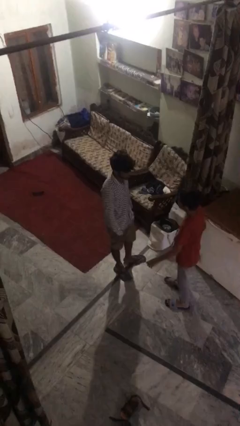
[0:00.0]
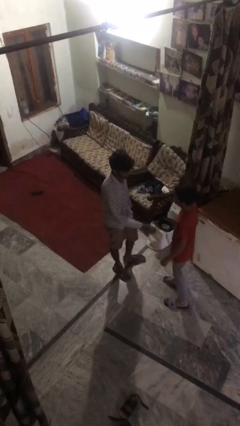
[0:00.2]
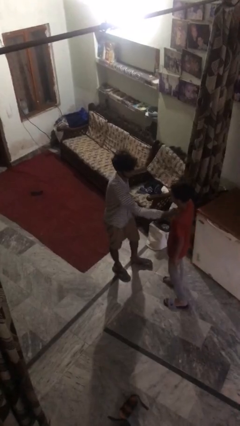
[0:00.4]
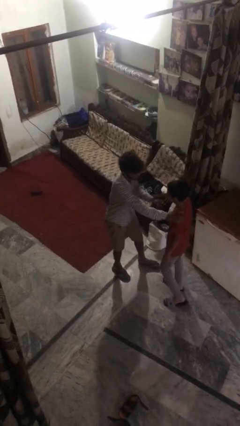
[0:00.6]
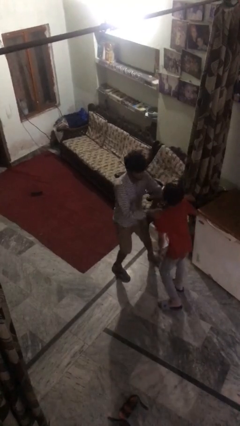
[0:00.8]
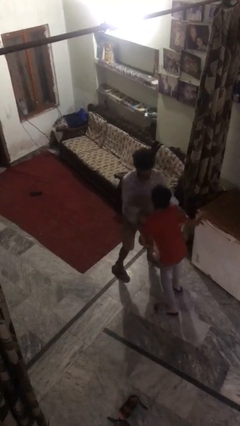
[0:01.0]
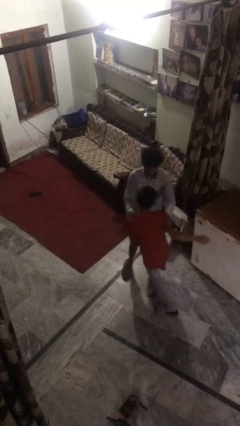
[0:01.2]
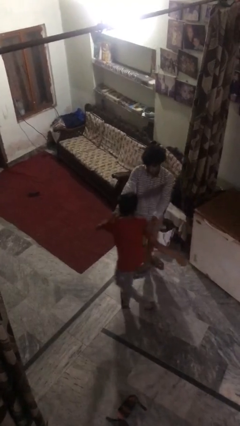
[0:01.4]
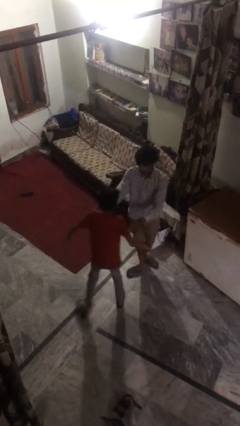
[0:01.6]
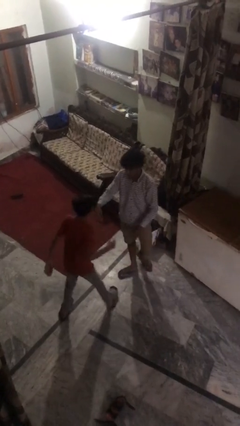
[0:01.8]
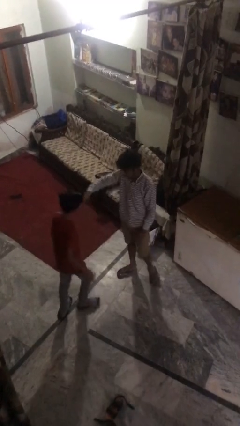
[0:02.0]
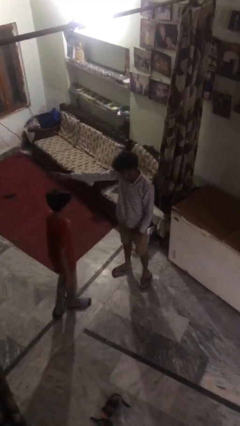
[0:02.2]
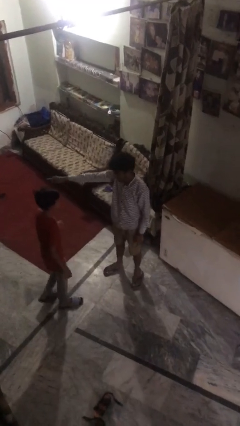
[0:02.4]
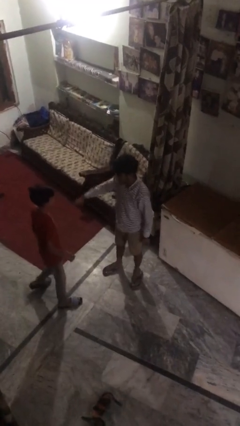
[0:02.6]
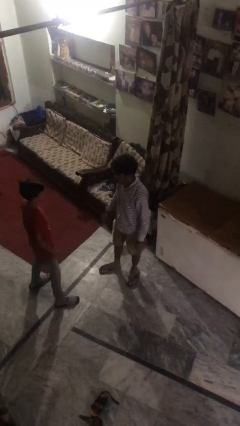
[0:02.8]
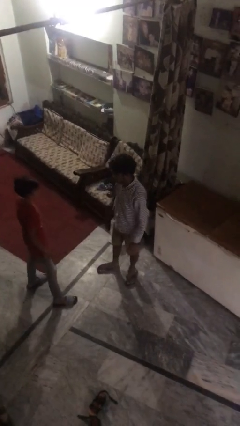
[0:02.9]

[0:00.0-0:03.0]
person shoves person

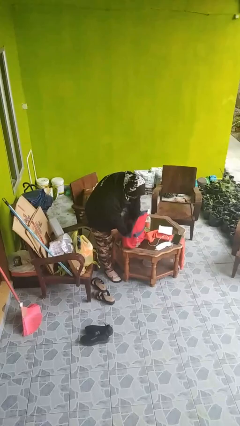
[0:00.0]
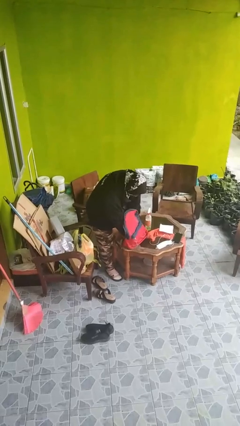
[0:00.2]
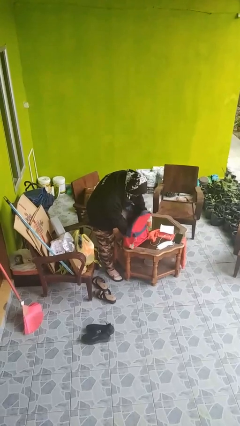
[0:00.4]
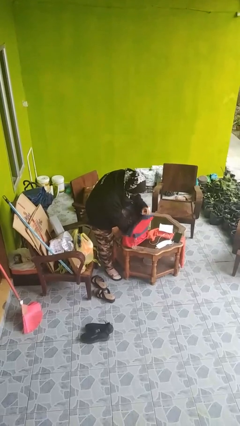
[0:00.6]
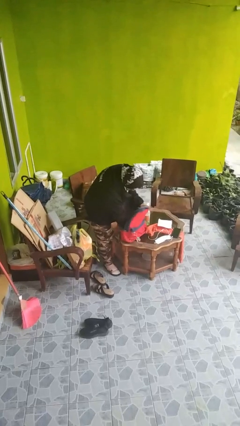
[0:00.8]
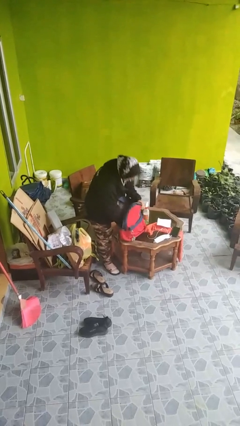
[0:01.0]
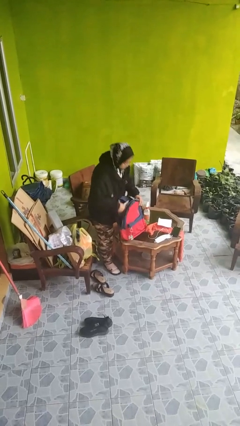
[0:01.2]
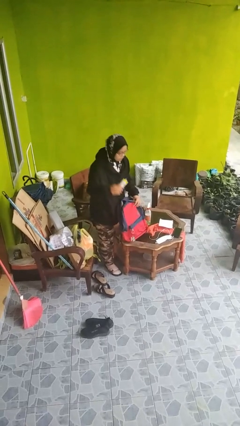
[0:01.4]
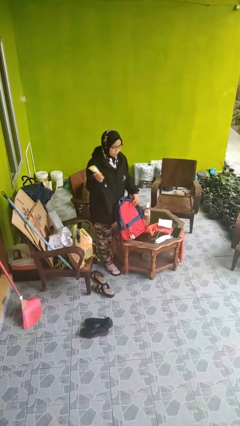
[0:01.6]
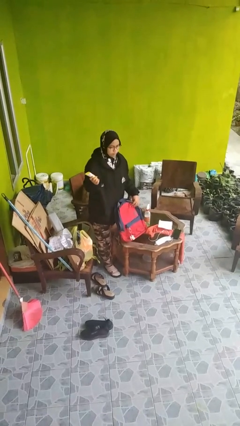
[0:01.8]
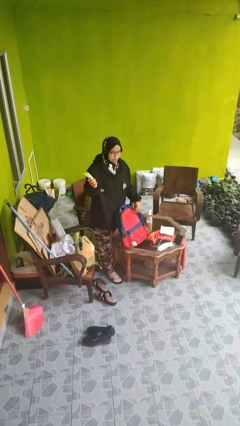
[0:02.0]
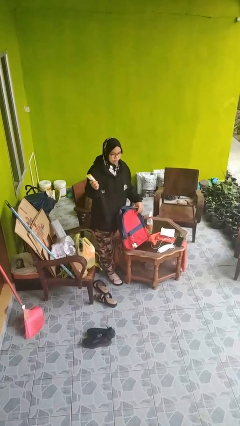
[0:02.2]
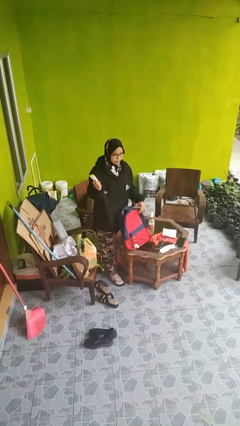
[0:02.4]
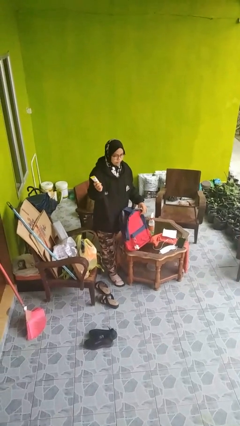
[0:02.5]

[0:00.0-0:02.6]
person takes object from backpack

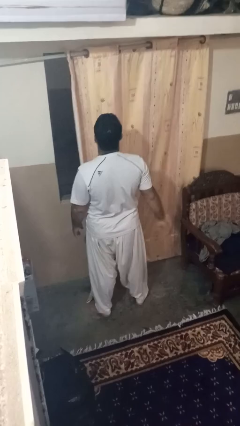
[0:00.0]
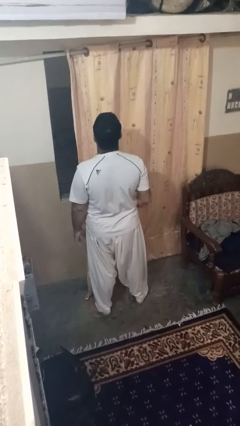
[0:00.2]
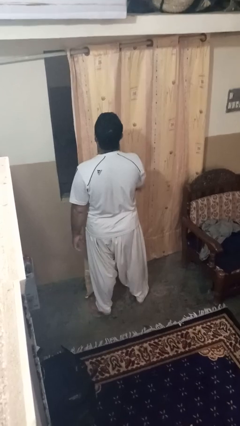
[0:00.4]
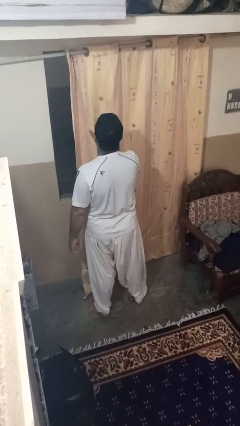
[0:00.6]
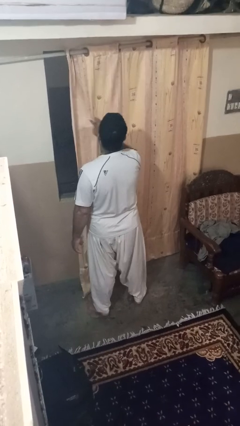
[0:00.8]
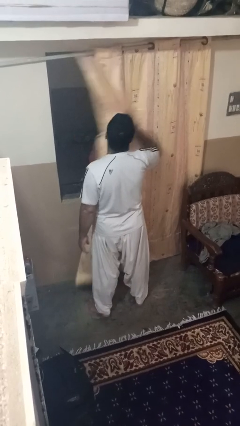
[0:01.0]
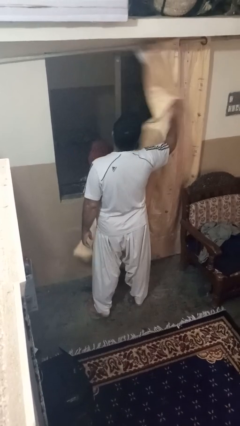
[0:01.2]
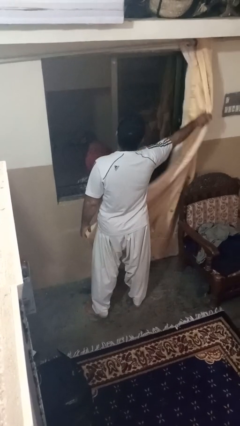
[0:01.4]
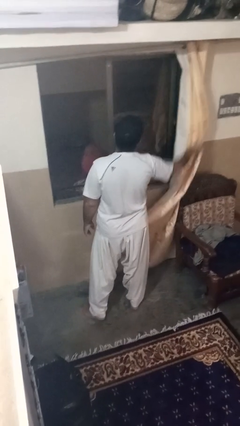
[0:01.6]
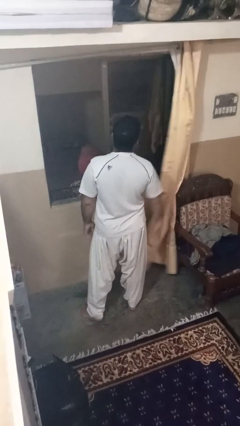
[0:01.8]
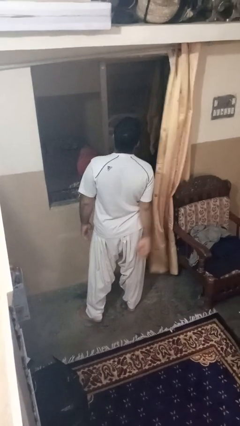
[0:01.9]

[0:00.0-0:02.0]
person opens curtains

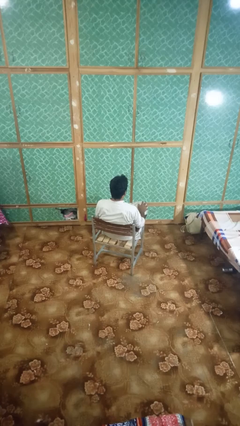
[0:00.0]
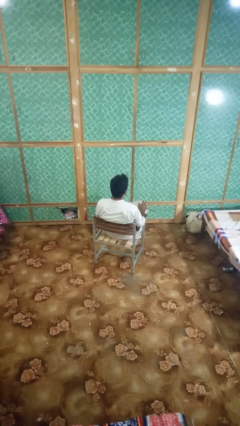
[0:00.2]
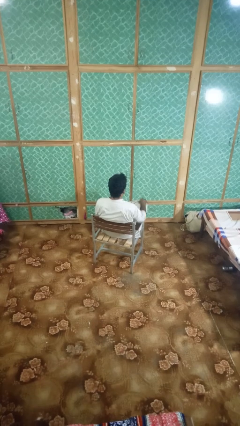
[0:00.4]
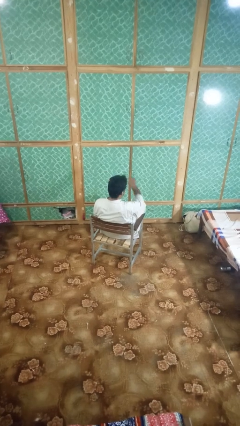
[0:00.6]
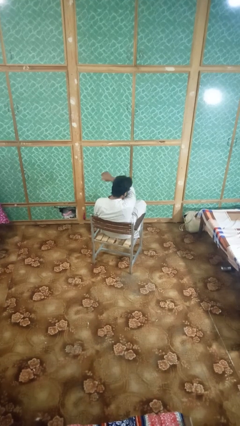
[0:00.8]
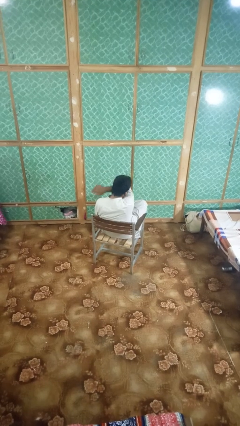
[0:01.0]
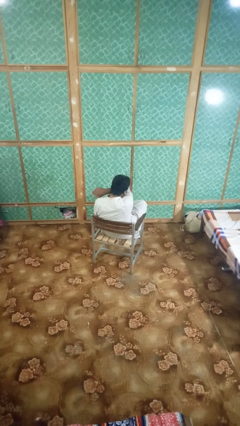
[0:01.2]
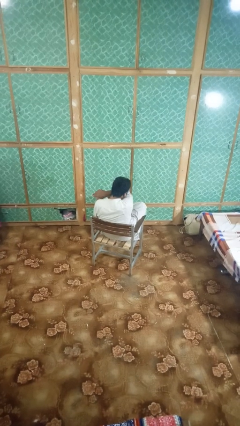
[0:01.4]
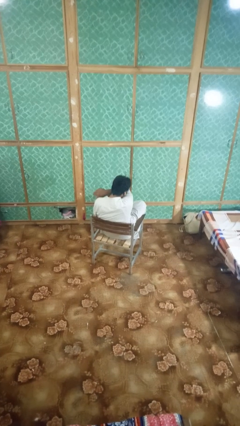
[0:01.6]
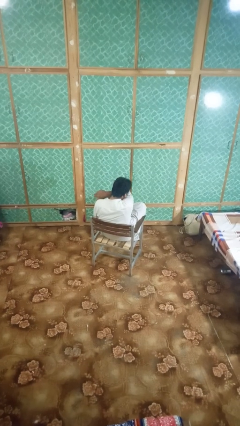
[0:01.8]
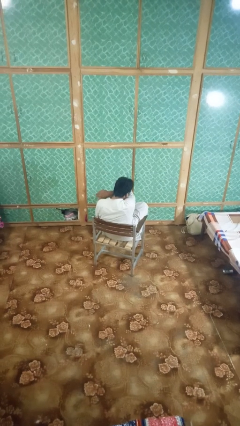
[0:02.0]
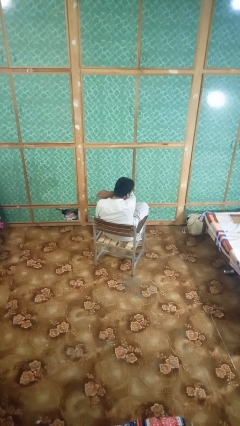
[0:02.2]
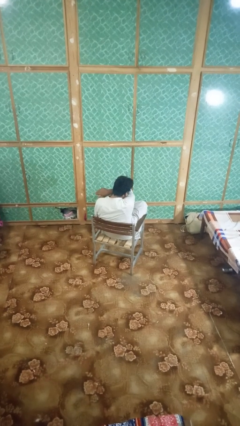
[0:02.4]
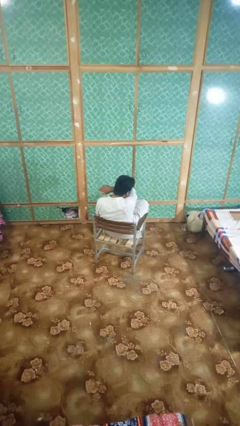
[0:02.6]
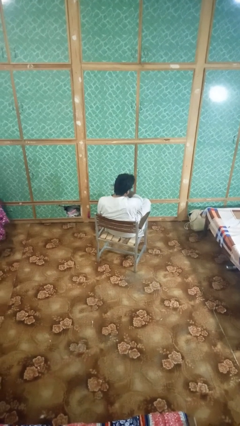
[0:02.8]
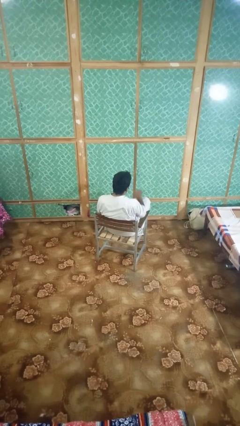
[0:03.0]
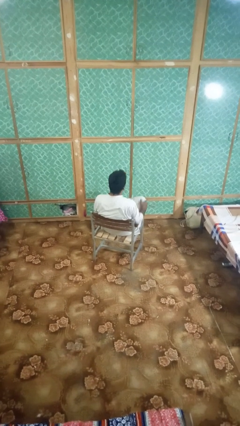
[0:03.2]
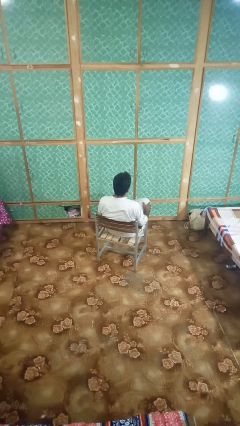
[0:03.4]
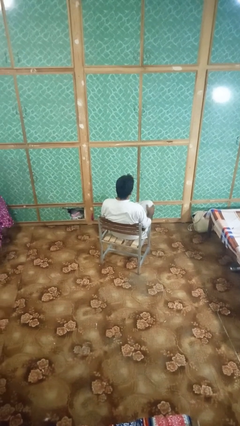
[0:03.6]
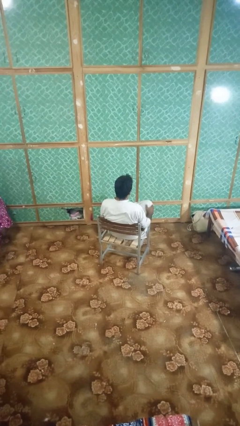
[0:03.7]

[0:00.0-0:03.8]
person sneezes into arm

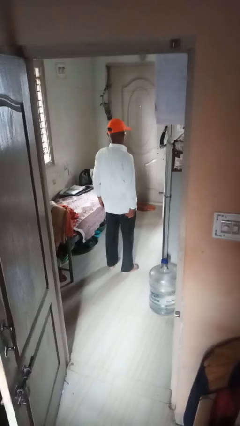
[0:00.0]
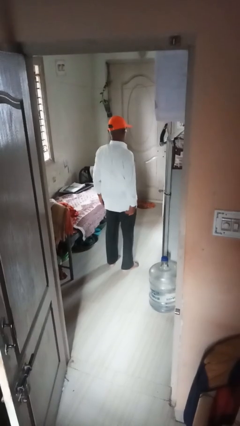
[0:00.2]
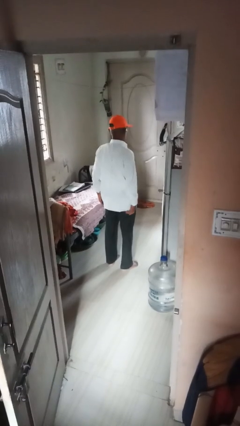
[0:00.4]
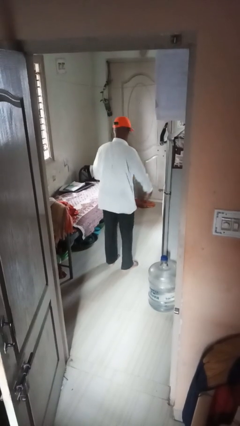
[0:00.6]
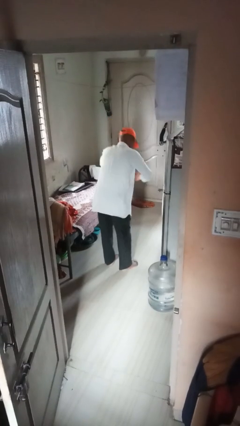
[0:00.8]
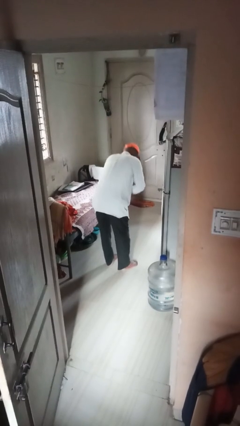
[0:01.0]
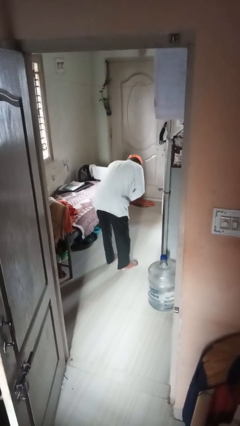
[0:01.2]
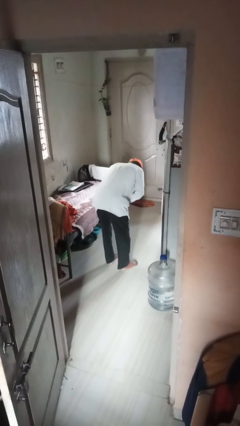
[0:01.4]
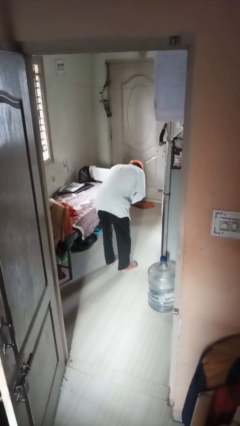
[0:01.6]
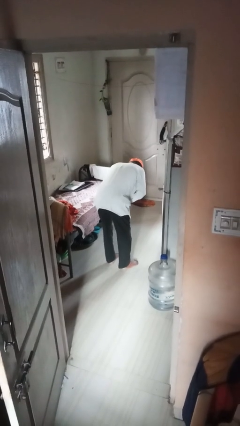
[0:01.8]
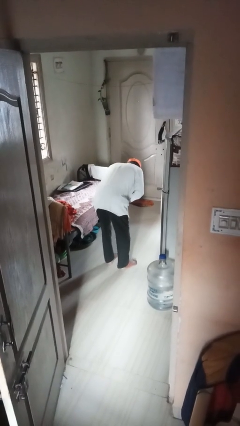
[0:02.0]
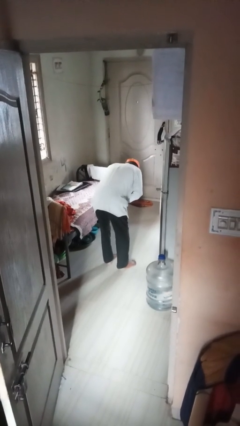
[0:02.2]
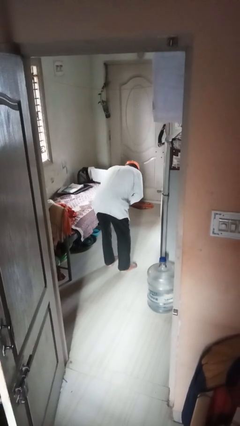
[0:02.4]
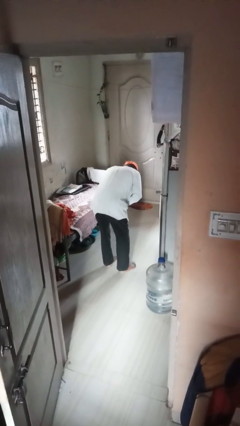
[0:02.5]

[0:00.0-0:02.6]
person bows

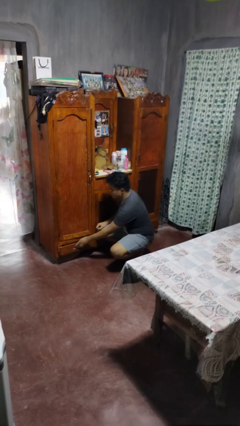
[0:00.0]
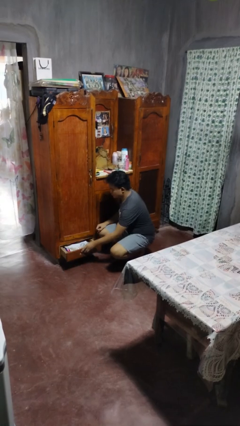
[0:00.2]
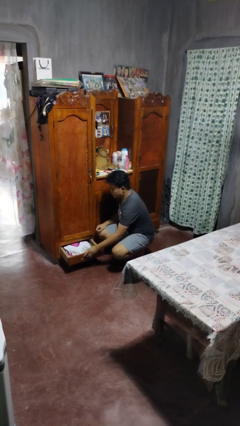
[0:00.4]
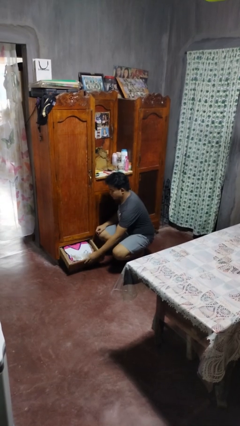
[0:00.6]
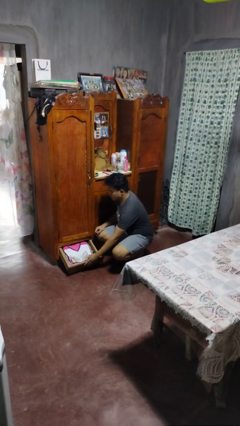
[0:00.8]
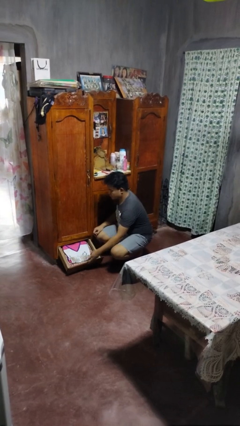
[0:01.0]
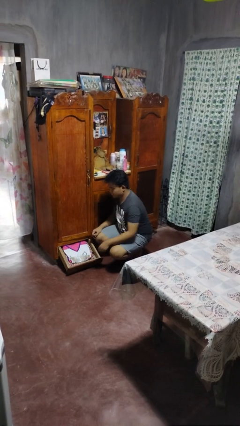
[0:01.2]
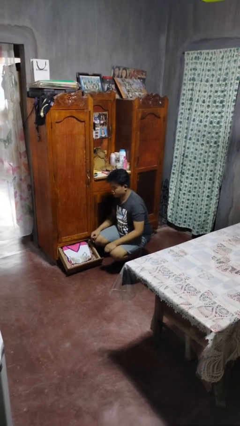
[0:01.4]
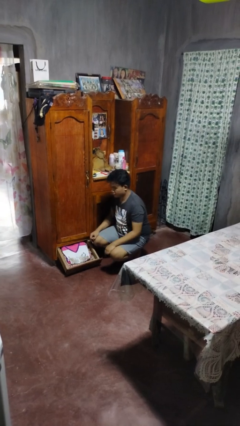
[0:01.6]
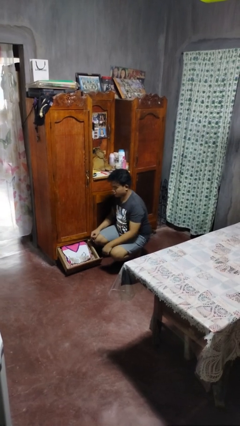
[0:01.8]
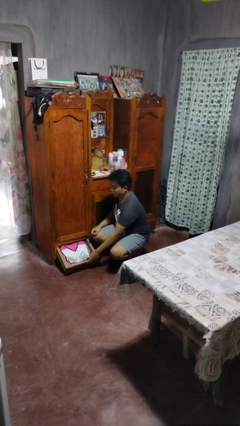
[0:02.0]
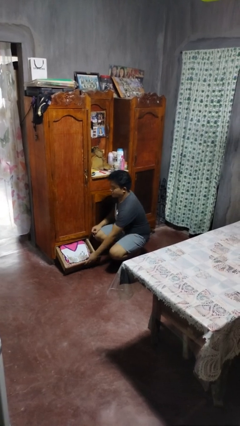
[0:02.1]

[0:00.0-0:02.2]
person opens dresser drawer

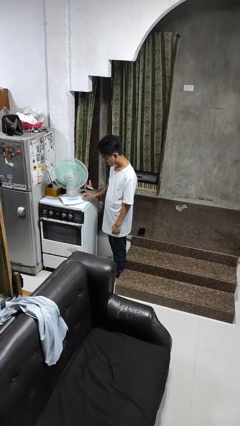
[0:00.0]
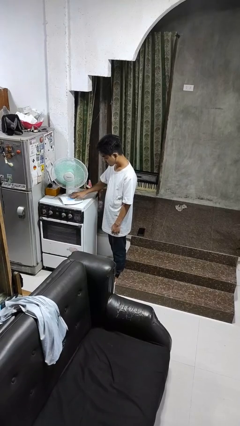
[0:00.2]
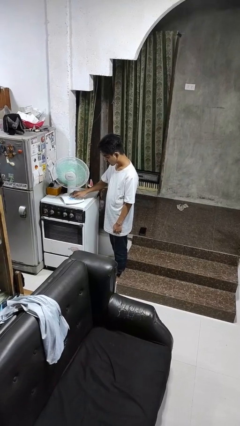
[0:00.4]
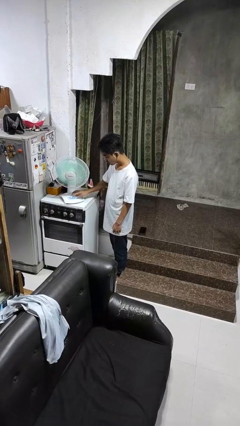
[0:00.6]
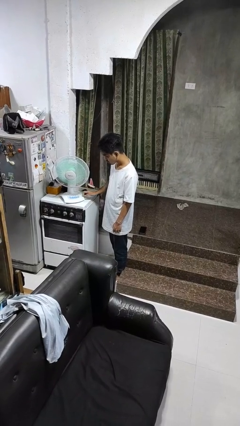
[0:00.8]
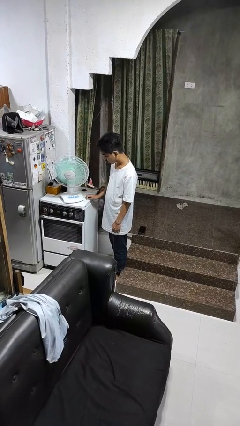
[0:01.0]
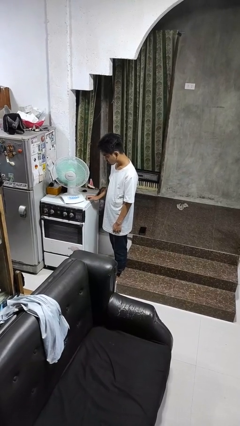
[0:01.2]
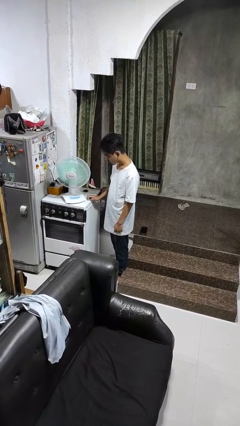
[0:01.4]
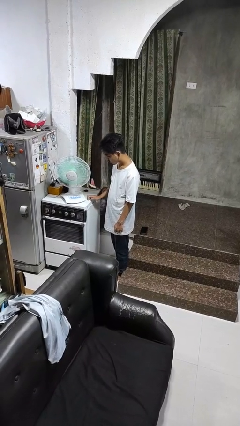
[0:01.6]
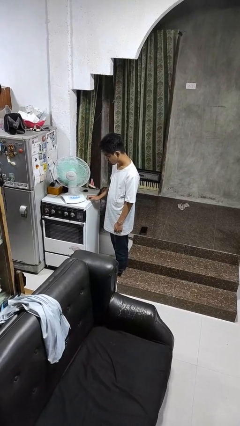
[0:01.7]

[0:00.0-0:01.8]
person turns off fan
